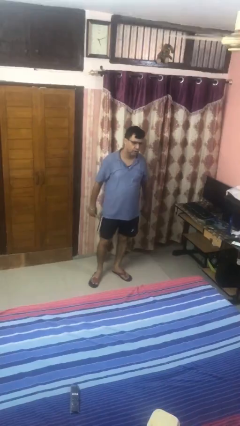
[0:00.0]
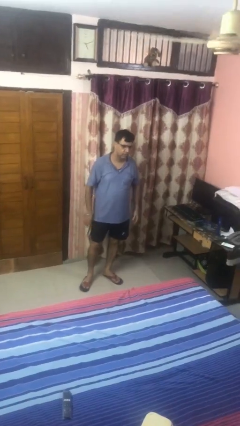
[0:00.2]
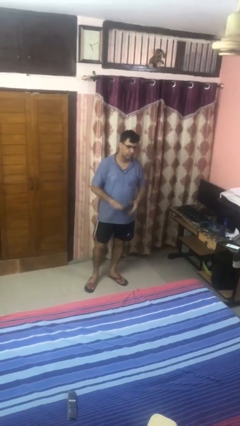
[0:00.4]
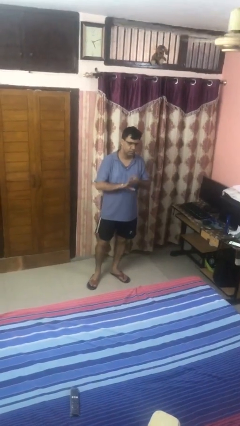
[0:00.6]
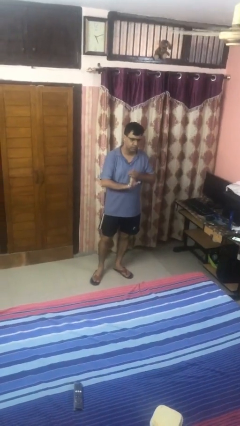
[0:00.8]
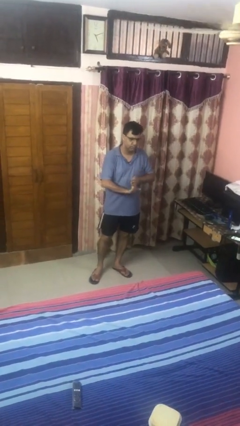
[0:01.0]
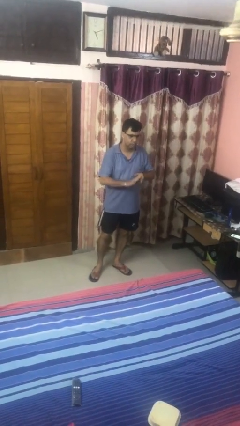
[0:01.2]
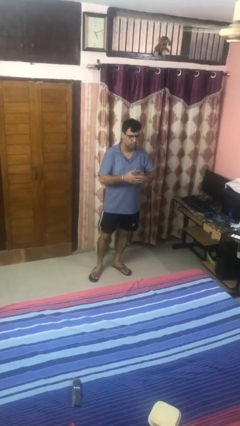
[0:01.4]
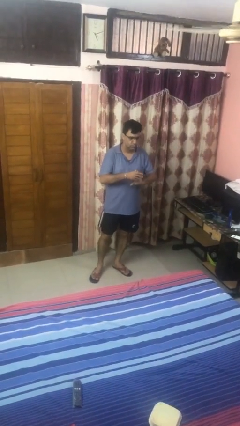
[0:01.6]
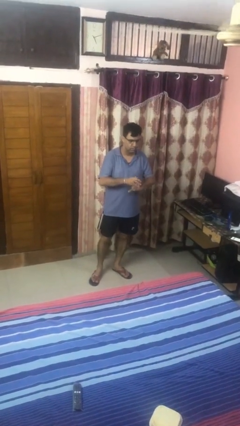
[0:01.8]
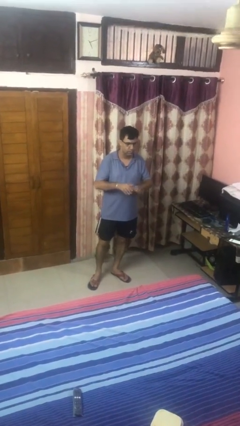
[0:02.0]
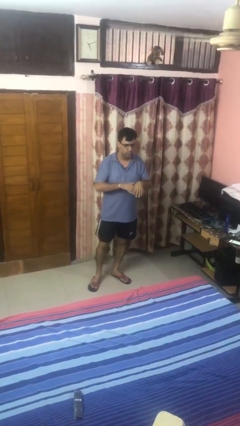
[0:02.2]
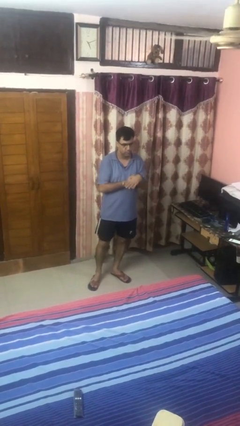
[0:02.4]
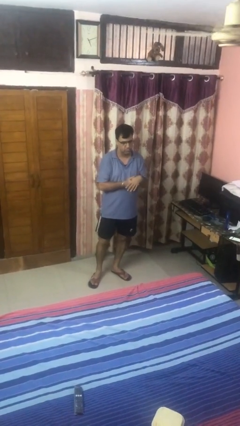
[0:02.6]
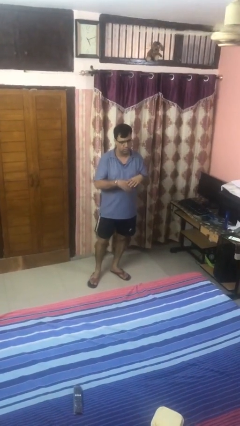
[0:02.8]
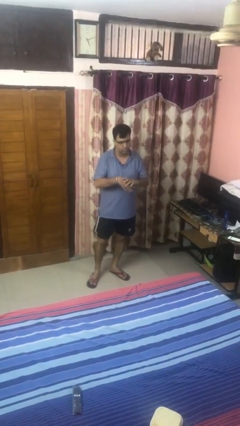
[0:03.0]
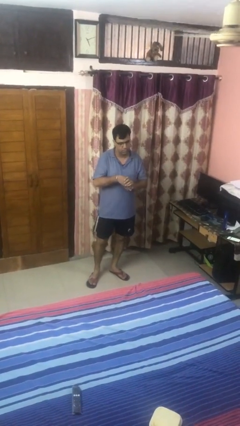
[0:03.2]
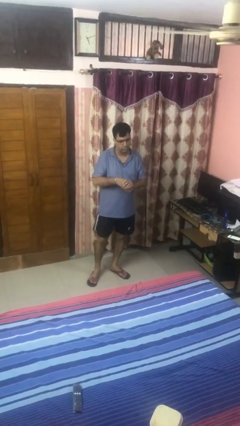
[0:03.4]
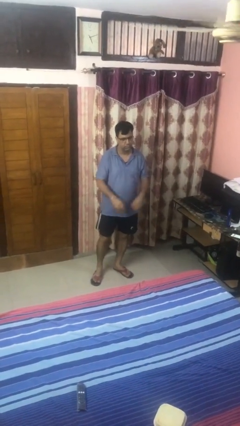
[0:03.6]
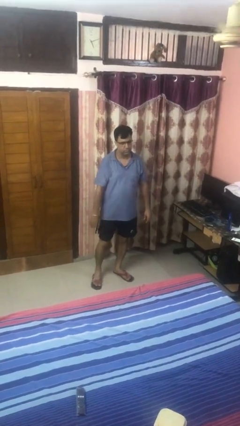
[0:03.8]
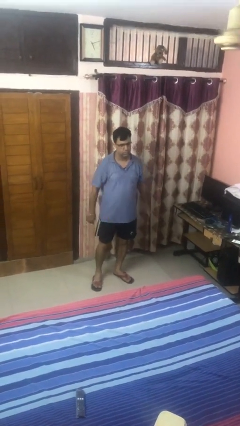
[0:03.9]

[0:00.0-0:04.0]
person cracks knuckles

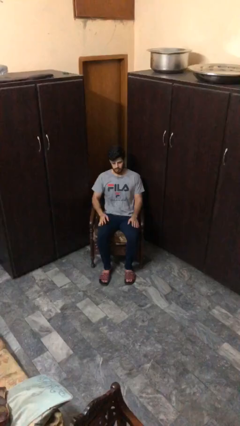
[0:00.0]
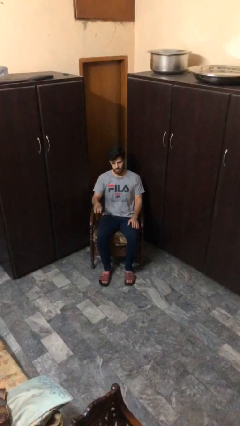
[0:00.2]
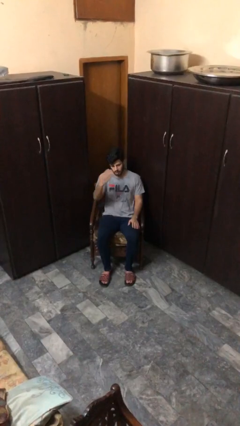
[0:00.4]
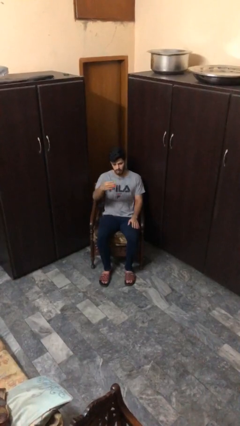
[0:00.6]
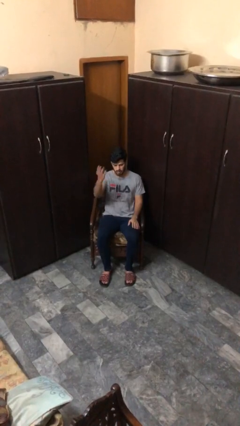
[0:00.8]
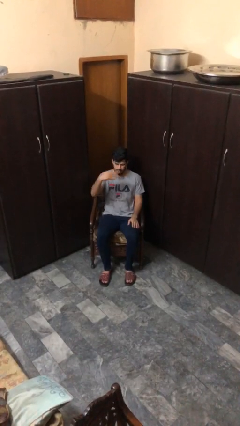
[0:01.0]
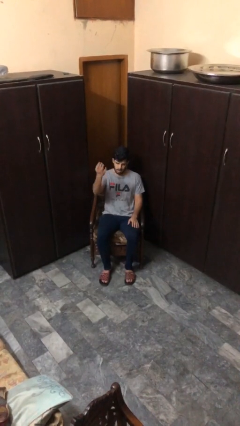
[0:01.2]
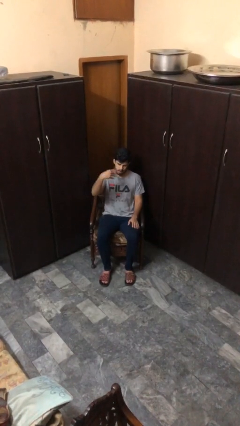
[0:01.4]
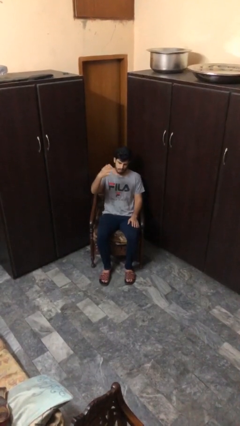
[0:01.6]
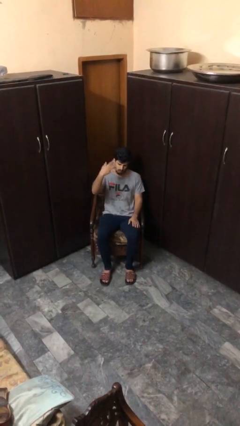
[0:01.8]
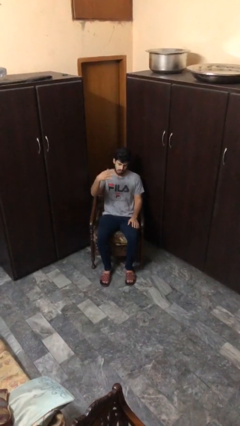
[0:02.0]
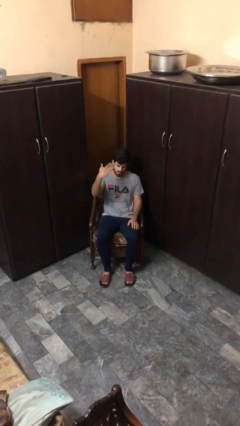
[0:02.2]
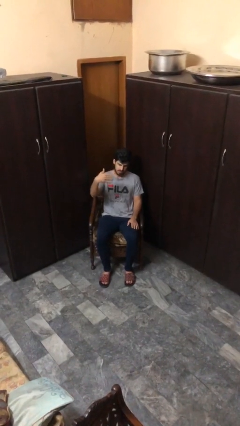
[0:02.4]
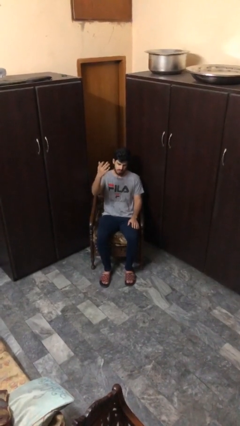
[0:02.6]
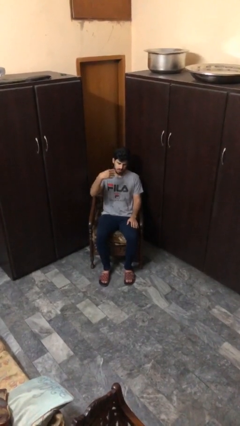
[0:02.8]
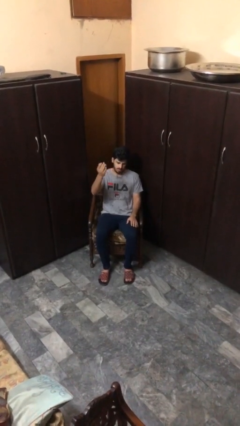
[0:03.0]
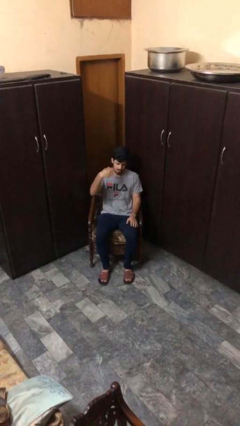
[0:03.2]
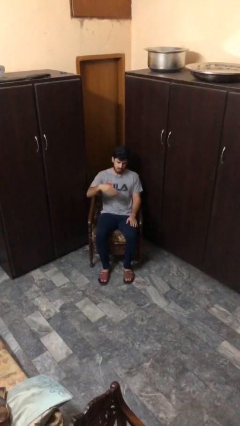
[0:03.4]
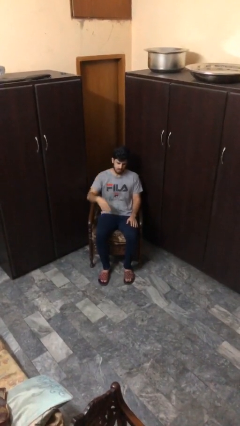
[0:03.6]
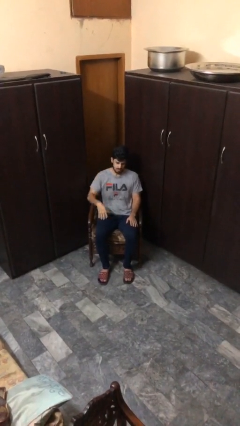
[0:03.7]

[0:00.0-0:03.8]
person gestures come here

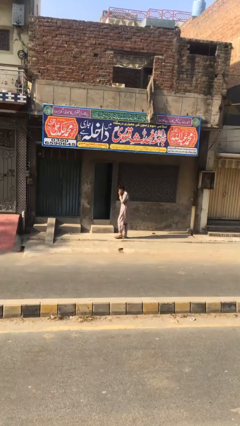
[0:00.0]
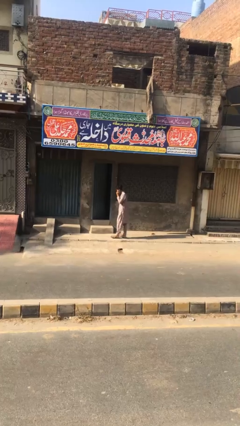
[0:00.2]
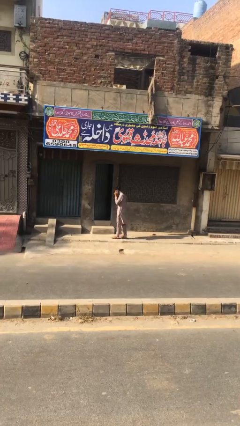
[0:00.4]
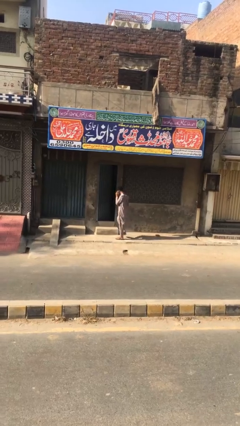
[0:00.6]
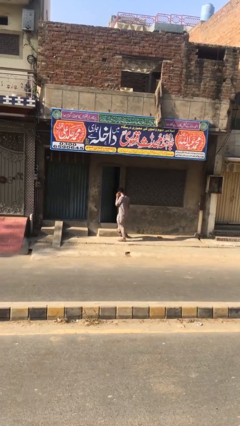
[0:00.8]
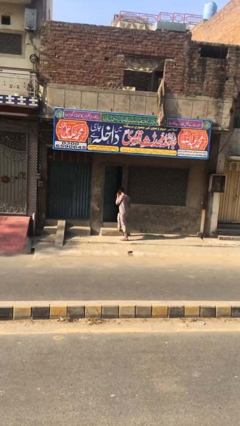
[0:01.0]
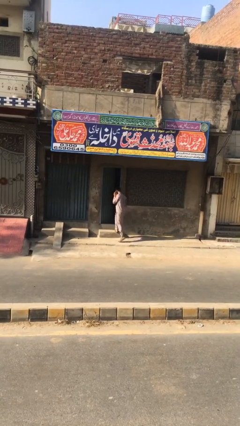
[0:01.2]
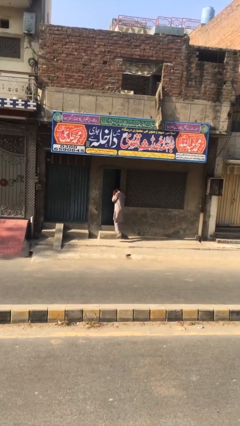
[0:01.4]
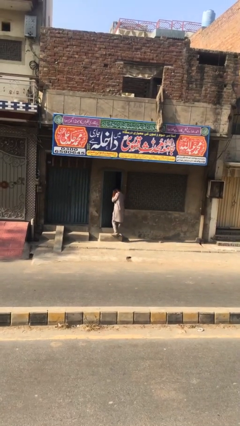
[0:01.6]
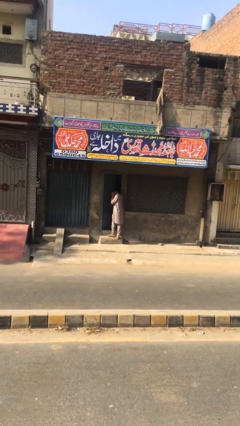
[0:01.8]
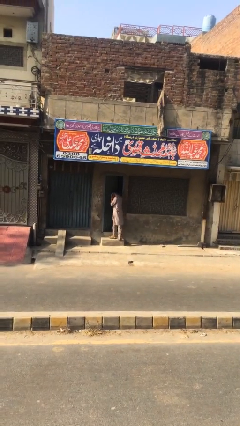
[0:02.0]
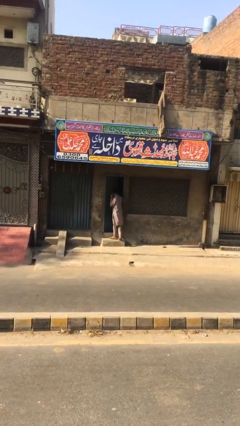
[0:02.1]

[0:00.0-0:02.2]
person opens facility door

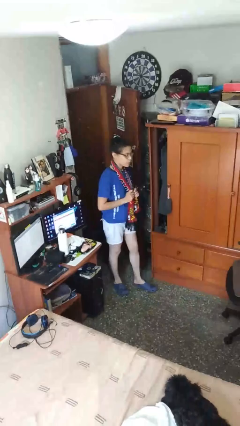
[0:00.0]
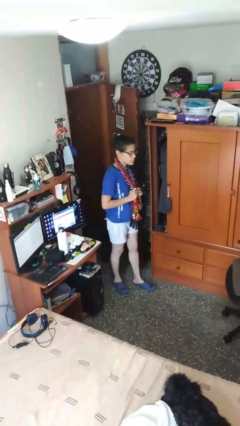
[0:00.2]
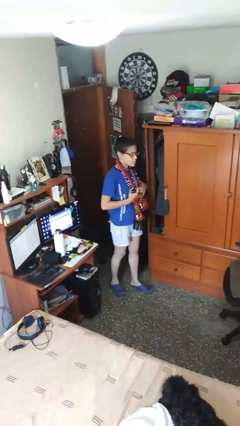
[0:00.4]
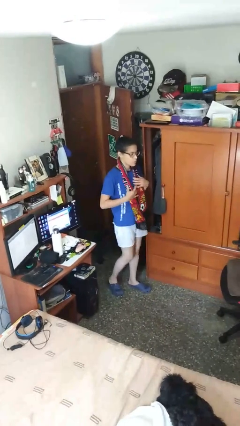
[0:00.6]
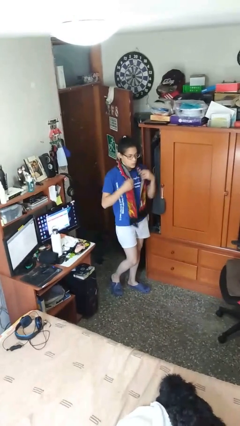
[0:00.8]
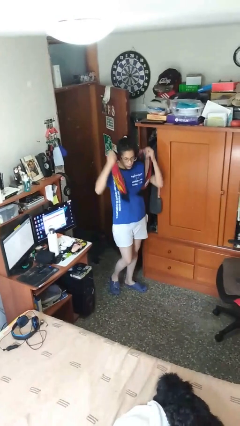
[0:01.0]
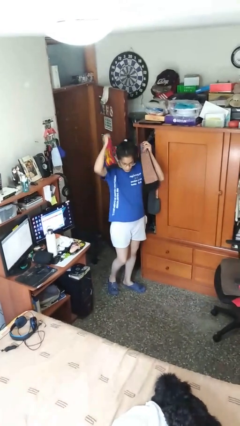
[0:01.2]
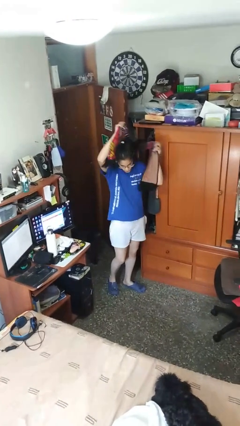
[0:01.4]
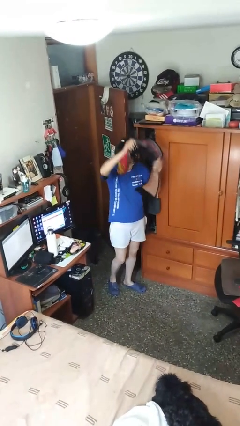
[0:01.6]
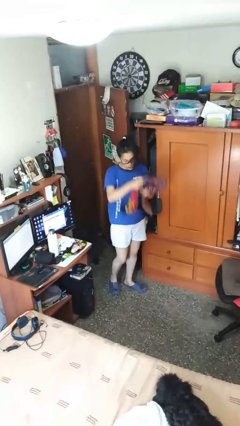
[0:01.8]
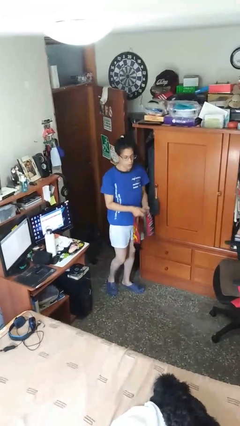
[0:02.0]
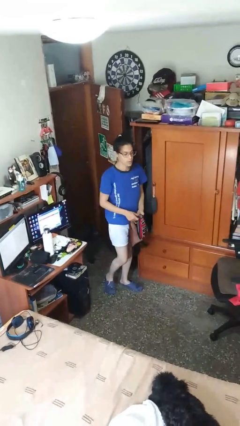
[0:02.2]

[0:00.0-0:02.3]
person takes off scarf

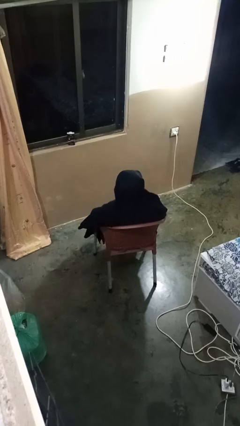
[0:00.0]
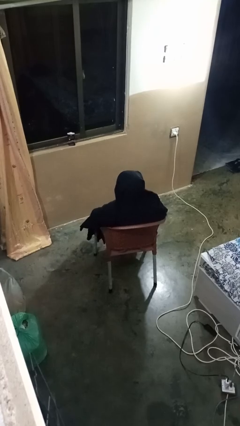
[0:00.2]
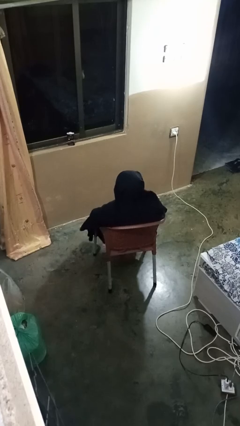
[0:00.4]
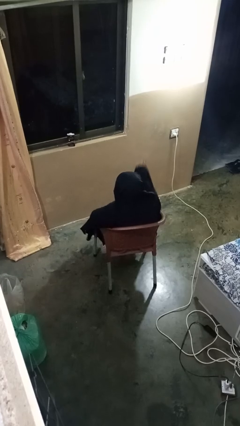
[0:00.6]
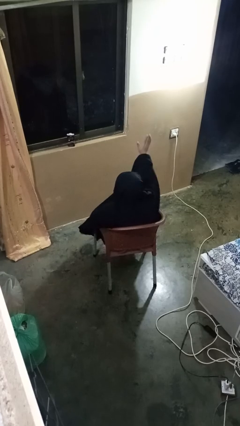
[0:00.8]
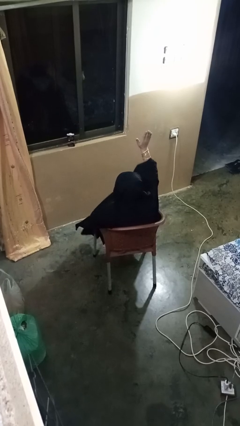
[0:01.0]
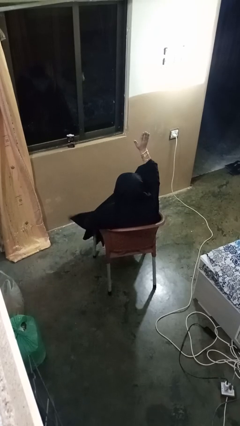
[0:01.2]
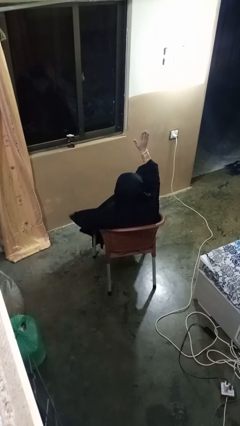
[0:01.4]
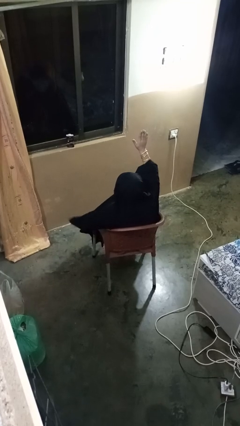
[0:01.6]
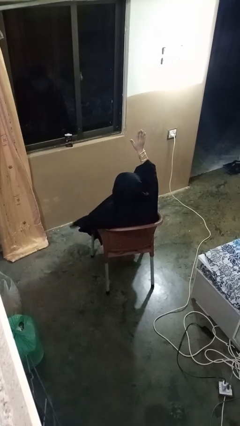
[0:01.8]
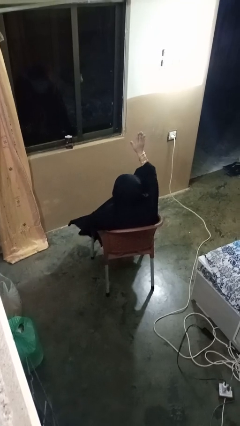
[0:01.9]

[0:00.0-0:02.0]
person gestures raise hand

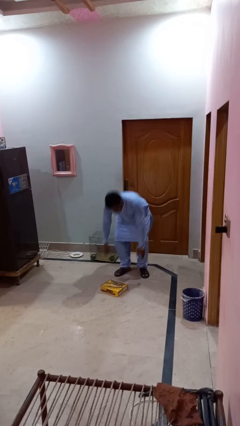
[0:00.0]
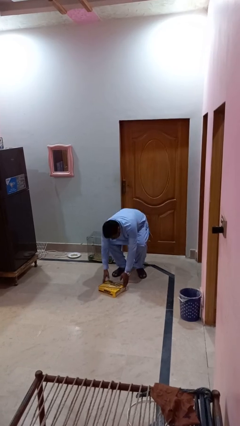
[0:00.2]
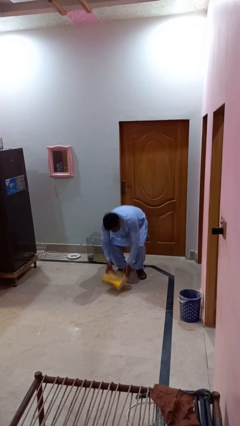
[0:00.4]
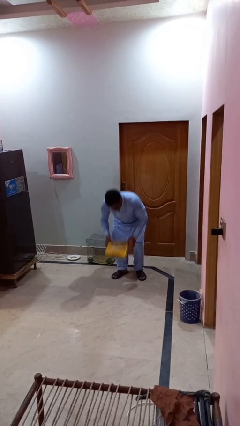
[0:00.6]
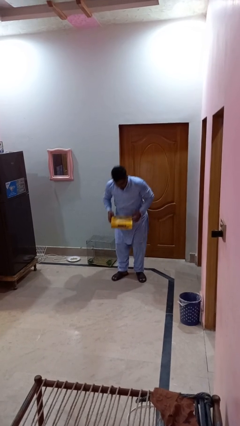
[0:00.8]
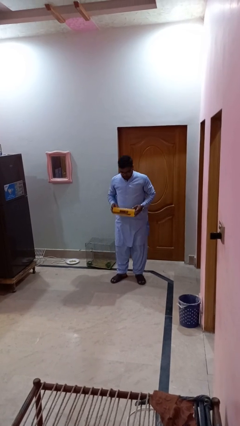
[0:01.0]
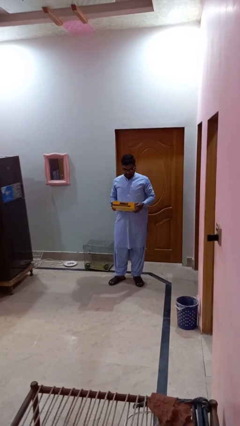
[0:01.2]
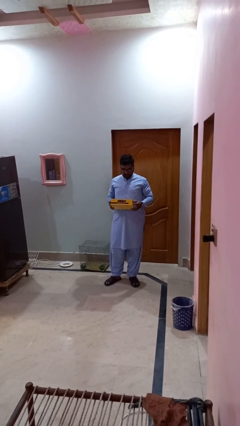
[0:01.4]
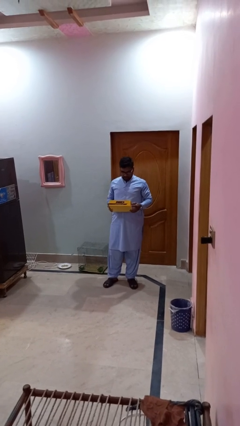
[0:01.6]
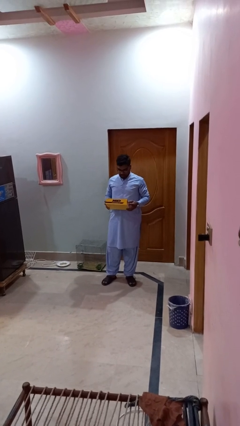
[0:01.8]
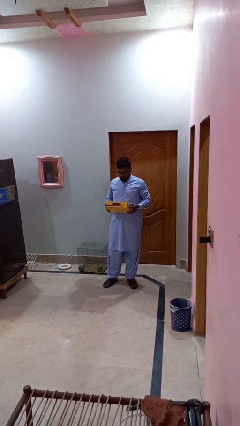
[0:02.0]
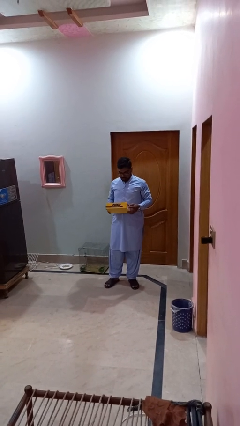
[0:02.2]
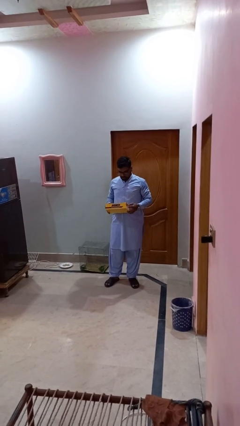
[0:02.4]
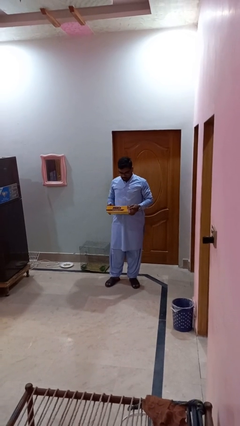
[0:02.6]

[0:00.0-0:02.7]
person picks up object from floor

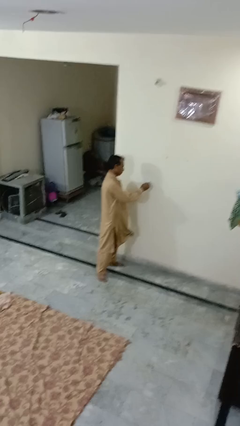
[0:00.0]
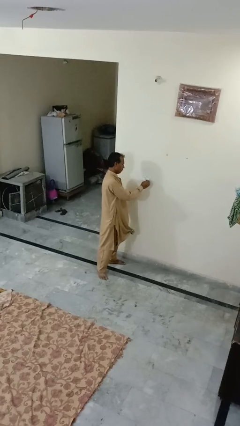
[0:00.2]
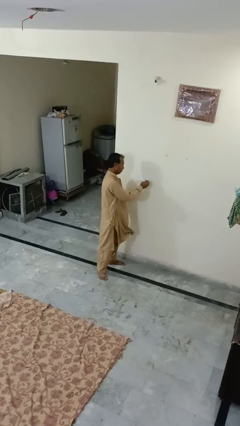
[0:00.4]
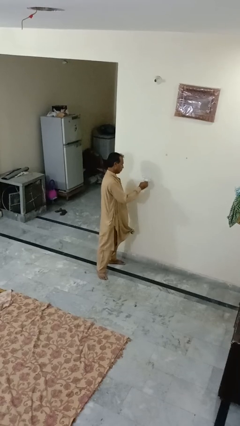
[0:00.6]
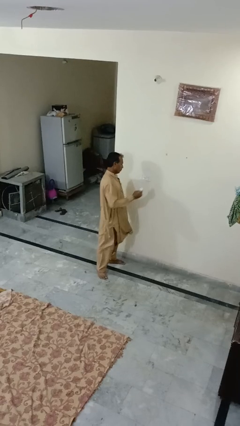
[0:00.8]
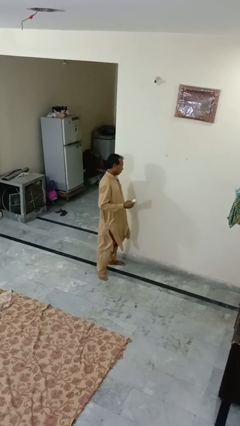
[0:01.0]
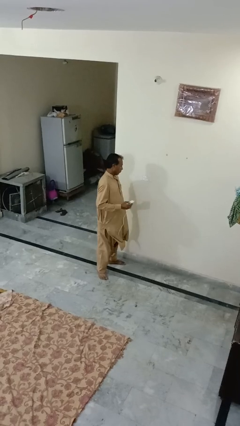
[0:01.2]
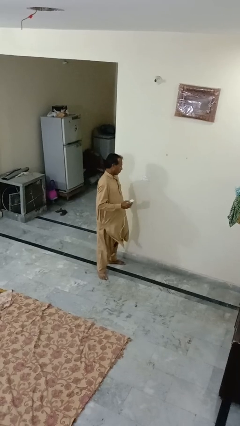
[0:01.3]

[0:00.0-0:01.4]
person unplugs from electrical socket
